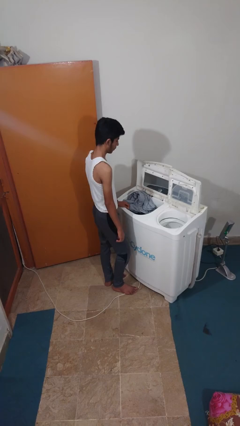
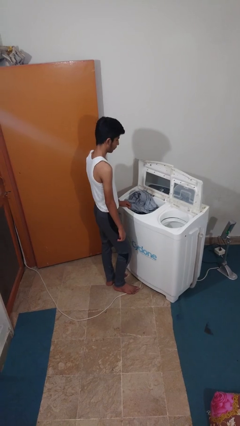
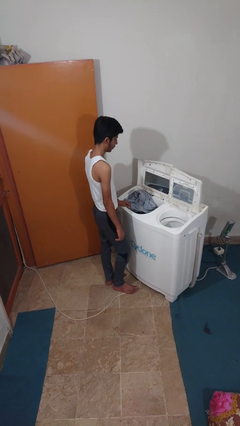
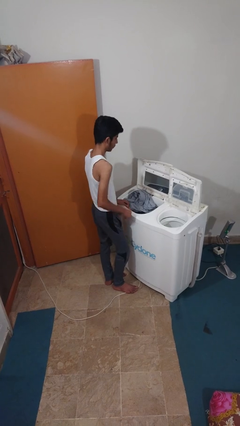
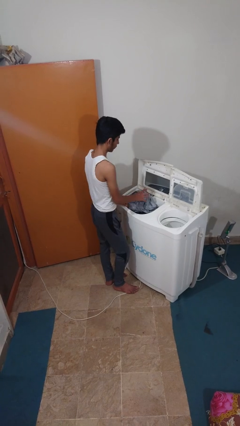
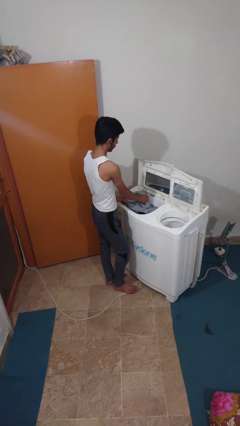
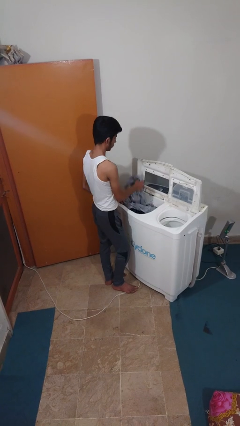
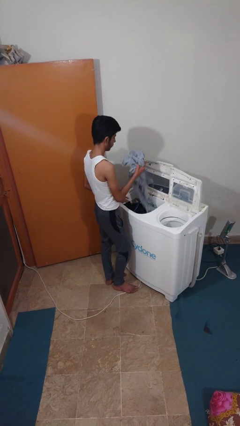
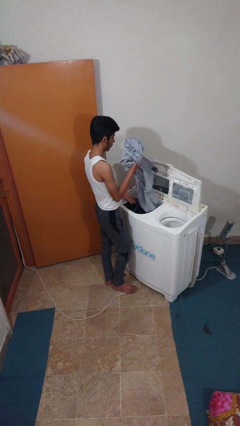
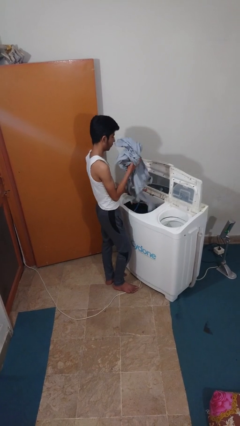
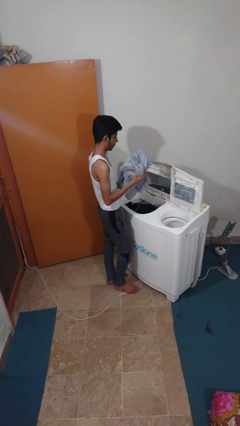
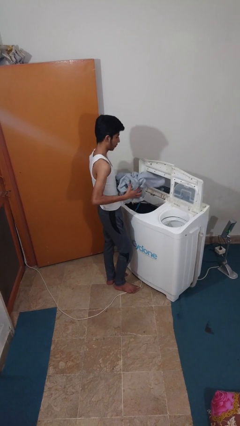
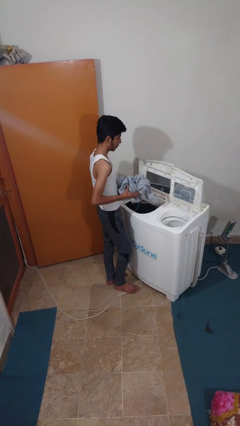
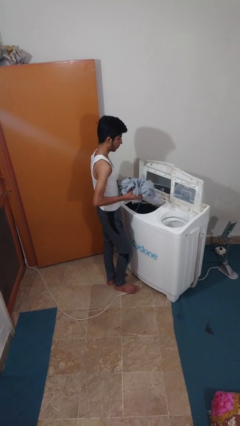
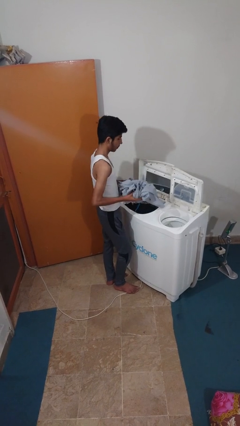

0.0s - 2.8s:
person unloads clotheswasher

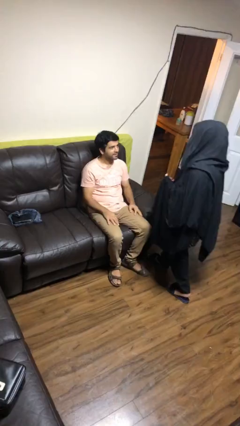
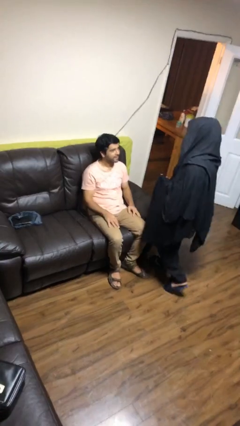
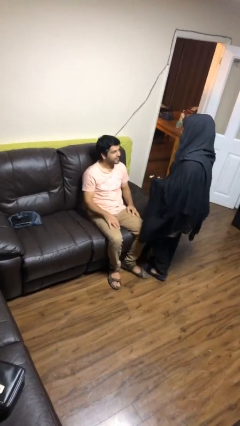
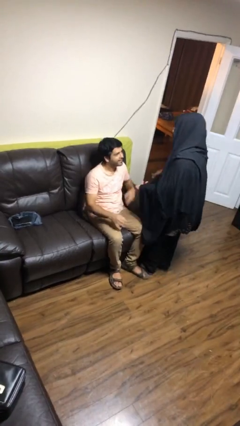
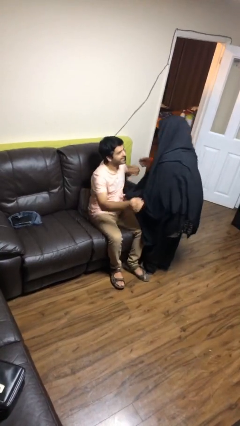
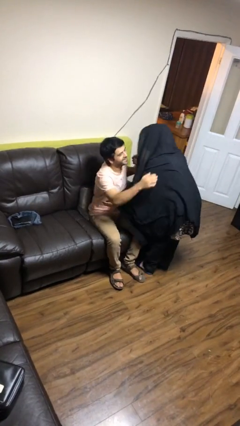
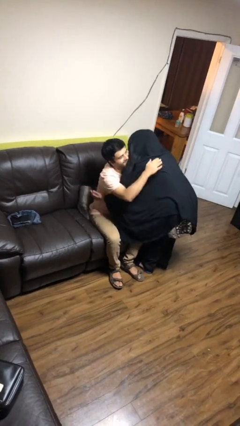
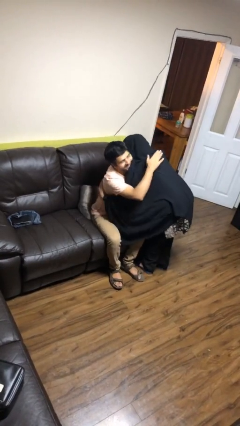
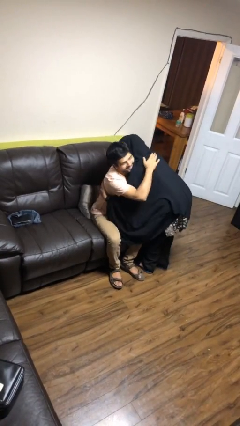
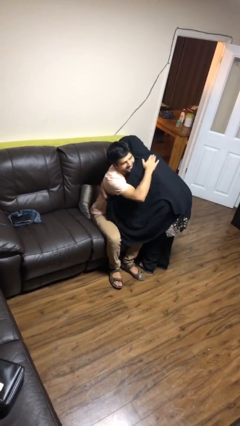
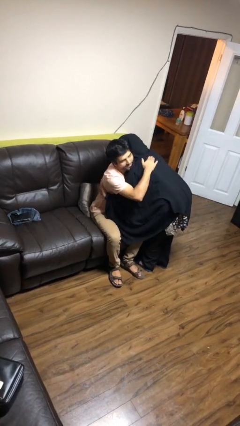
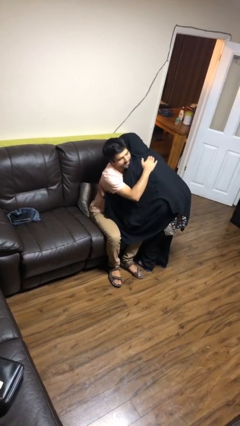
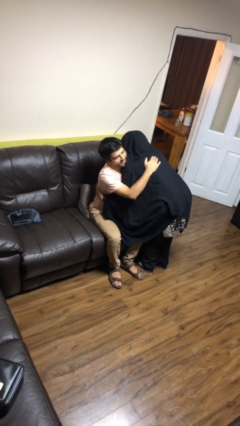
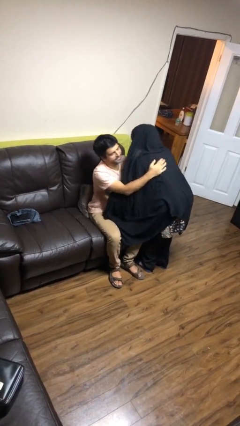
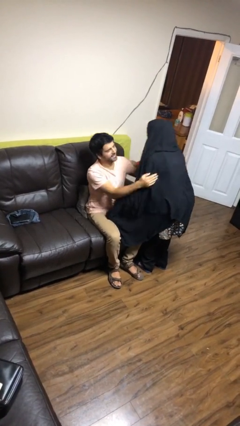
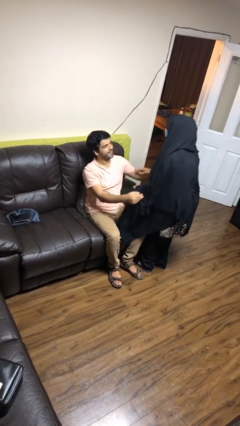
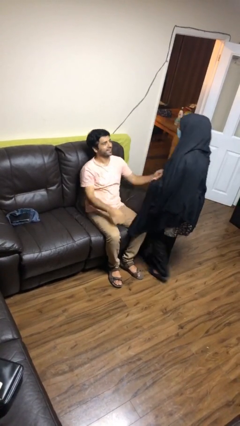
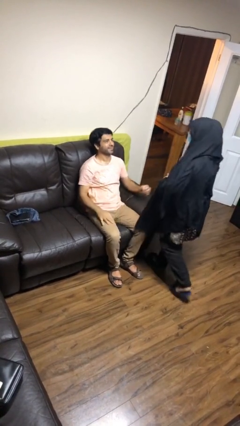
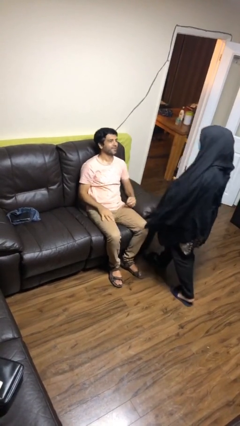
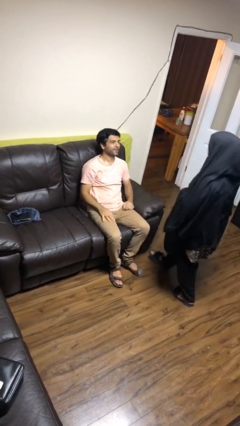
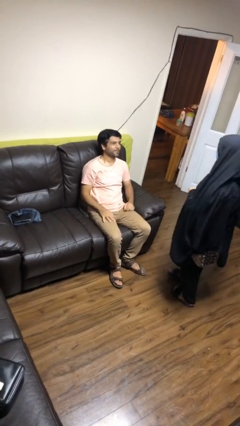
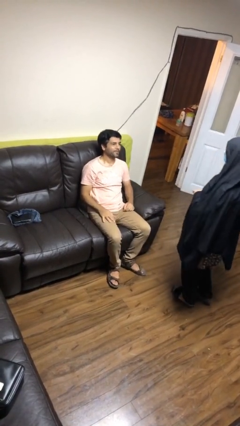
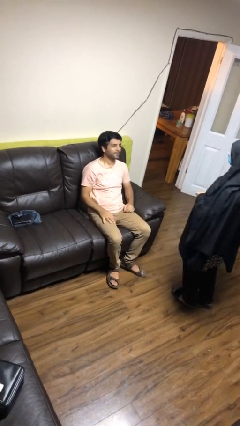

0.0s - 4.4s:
person embraces person

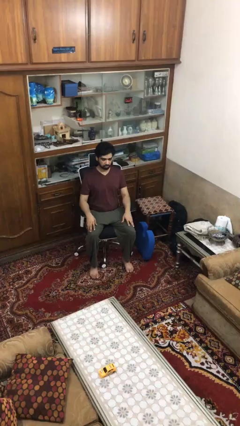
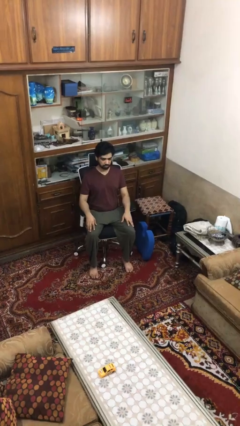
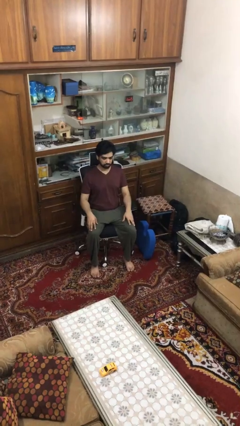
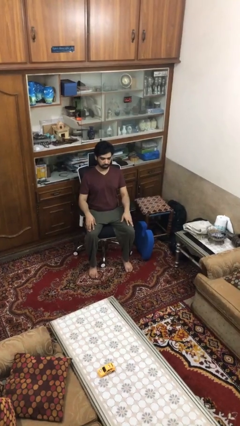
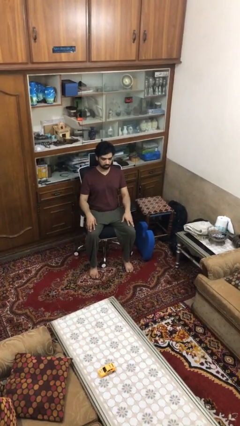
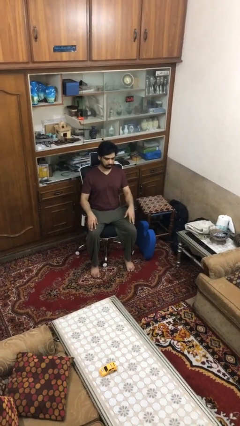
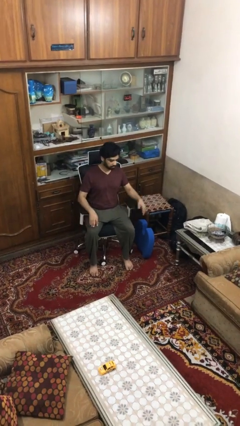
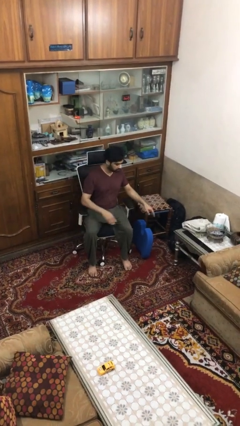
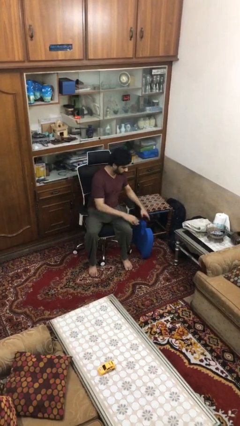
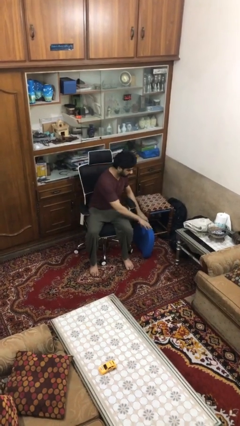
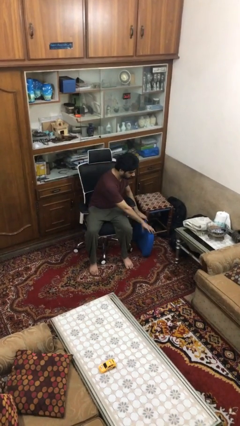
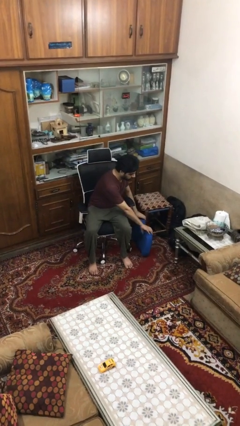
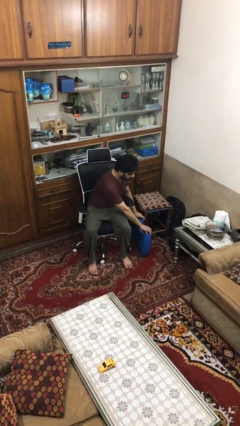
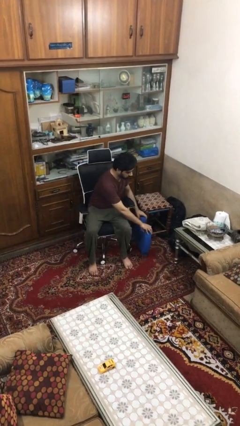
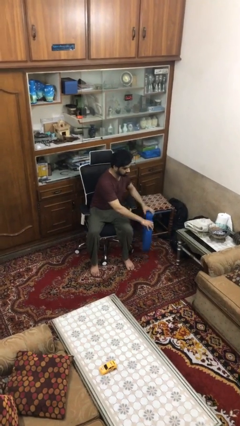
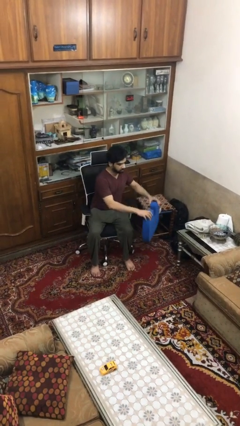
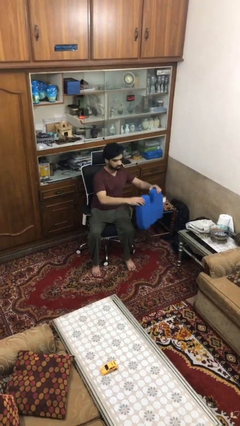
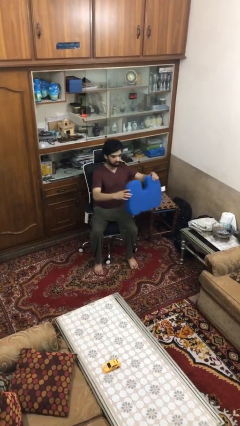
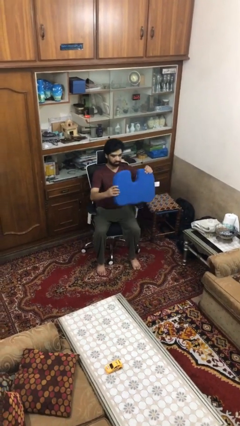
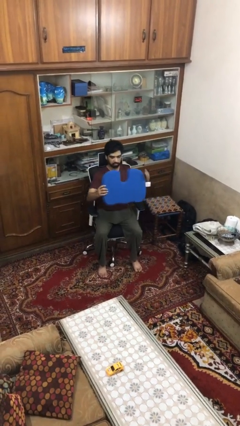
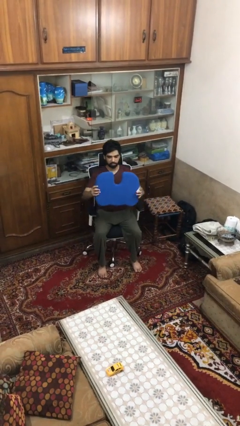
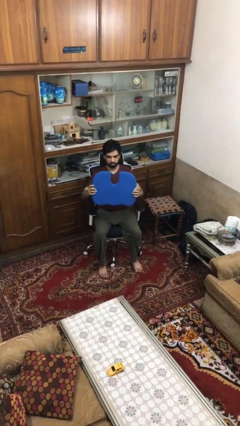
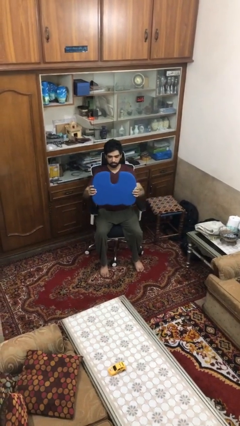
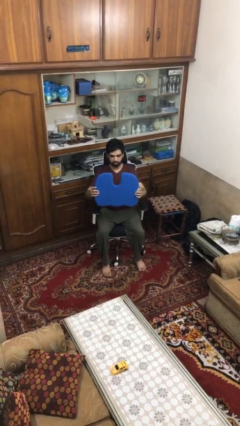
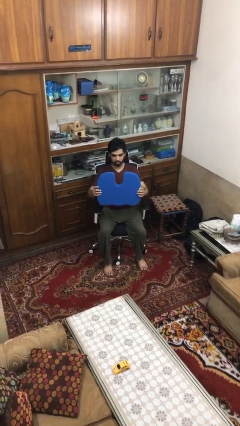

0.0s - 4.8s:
person picks up object from floor

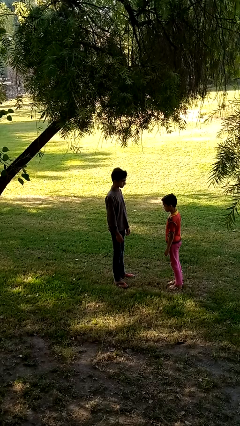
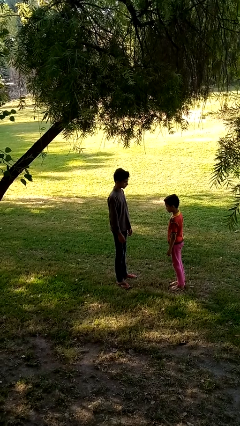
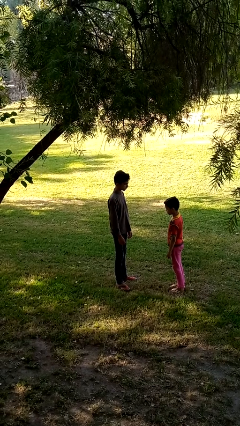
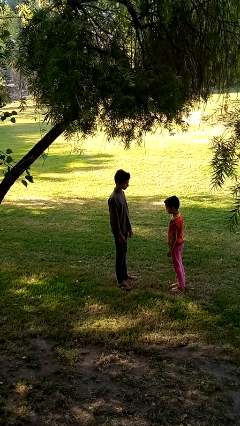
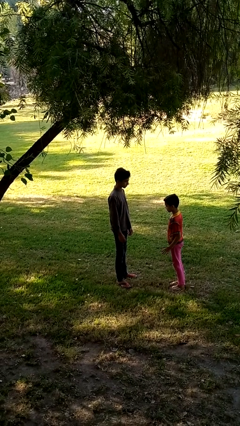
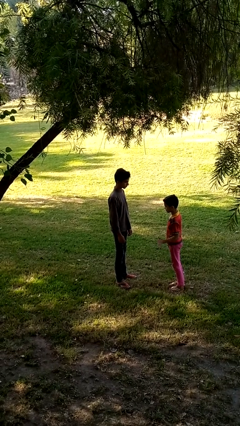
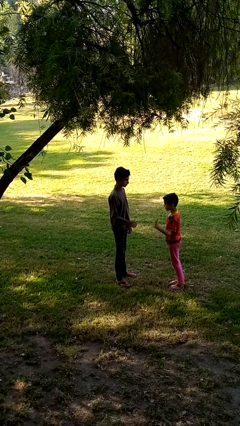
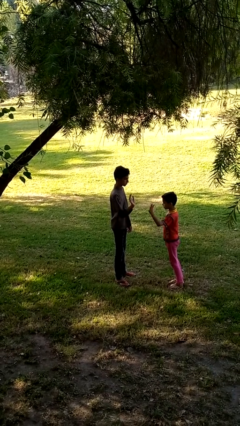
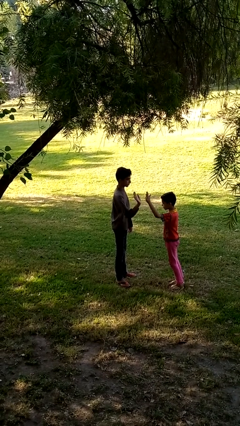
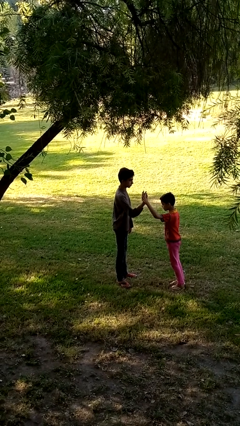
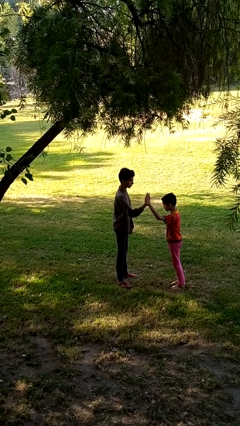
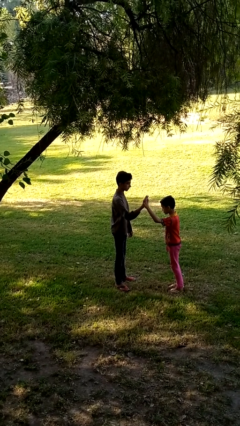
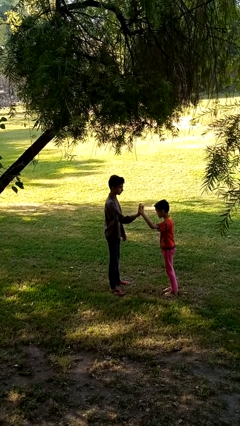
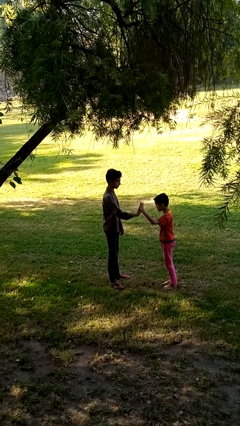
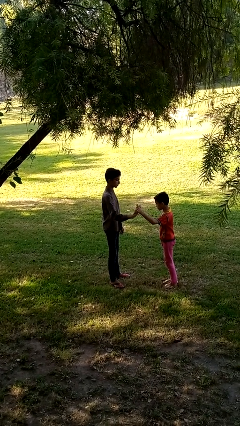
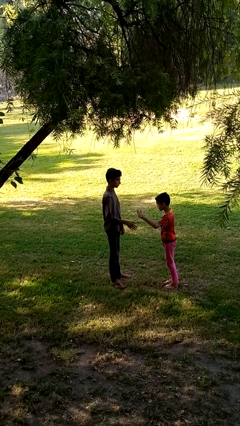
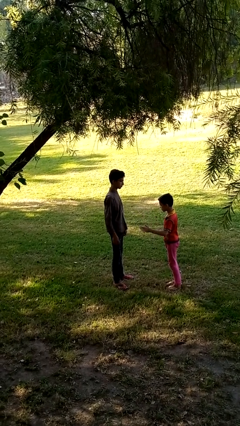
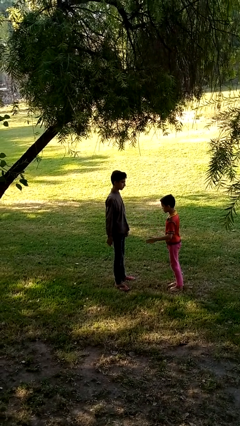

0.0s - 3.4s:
person highfives hand

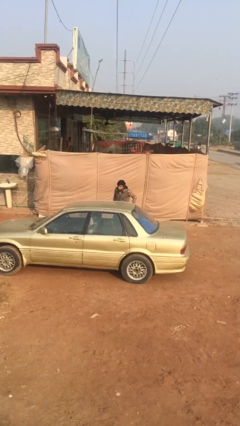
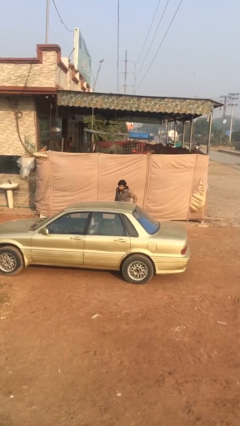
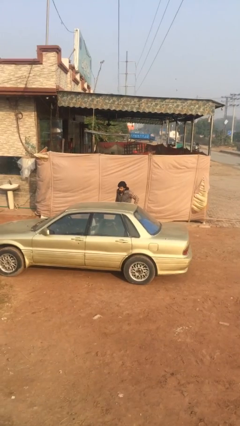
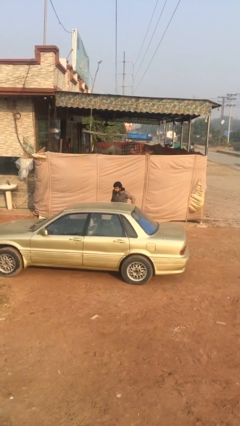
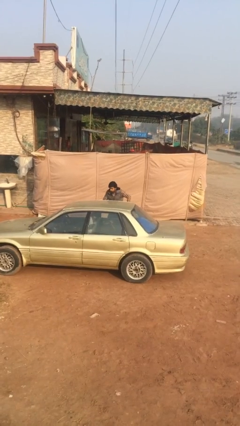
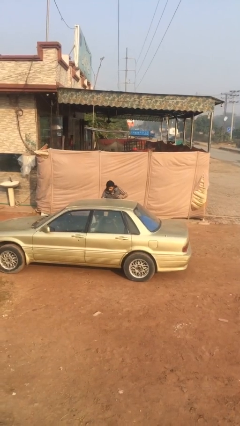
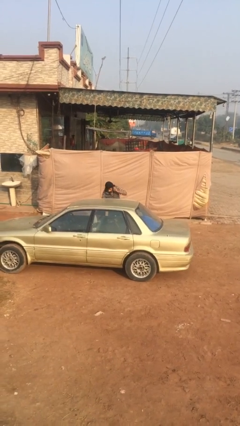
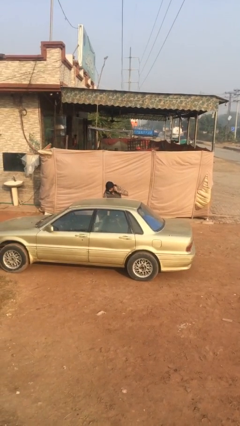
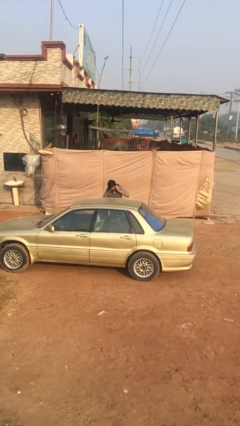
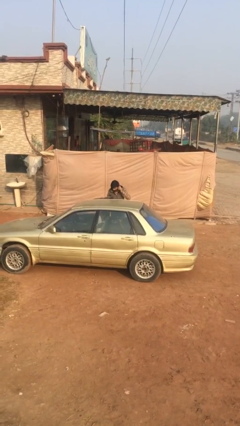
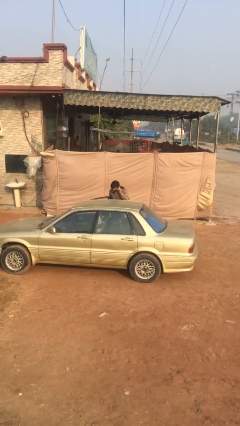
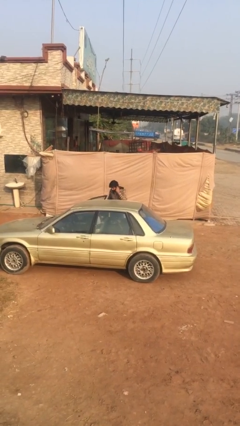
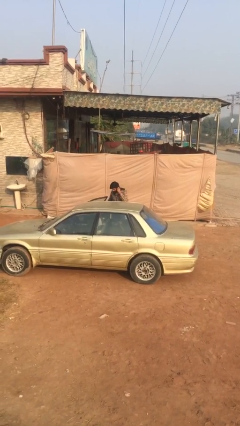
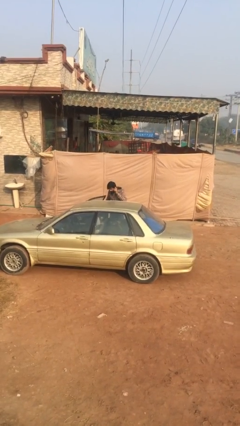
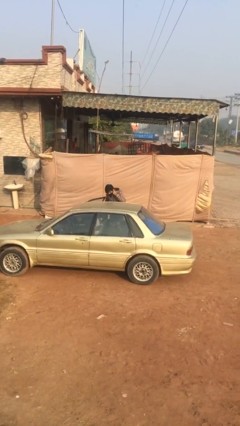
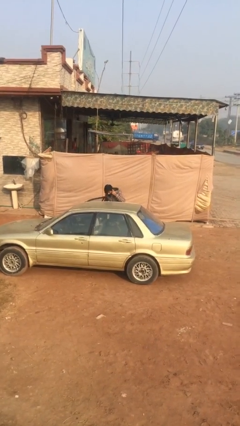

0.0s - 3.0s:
person opens car door
